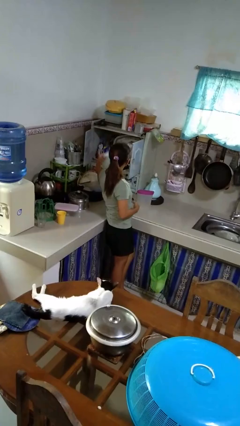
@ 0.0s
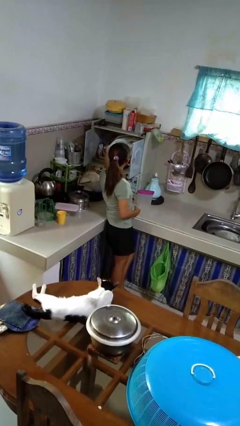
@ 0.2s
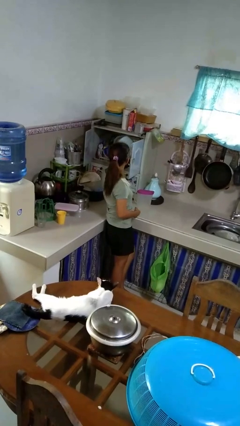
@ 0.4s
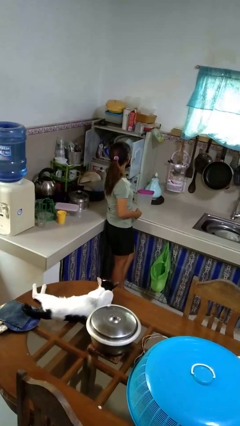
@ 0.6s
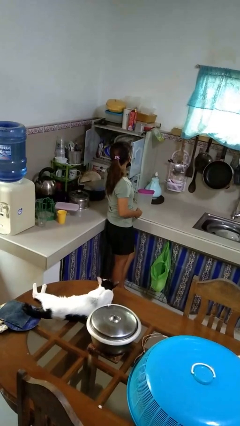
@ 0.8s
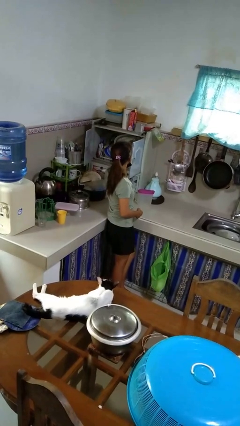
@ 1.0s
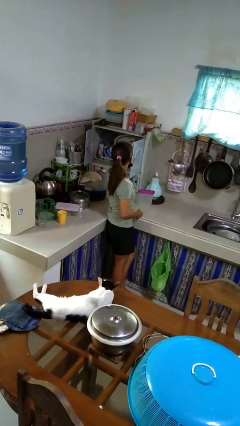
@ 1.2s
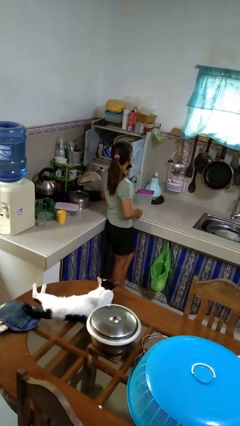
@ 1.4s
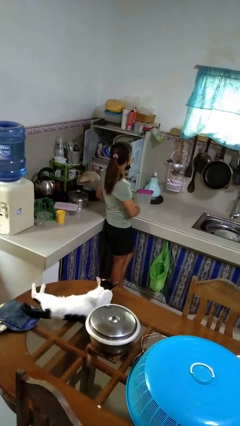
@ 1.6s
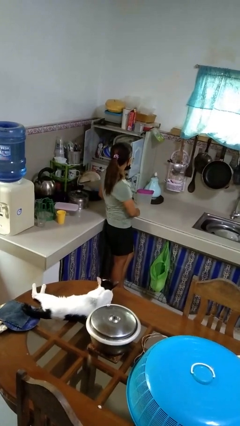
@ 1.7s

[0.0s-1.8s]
person puts object into kitchen drawer

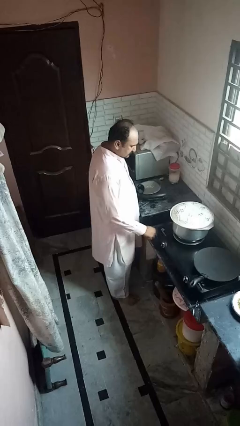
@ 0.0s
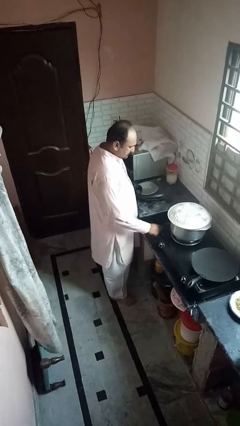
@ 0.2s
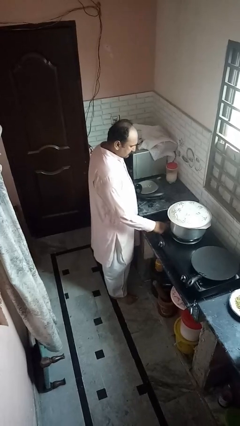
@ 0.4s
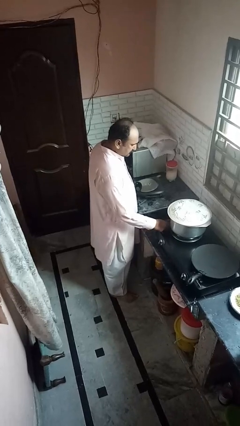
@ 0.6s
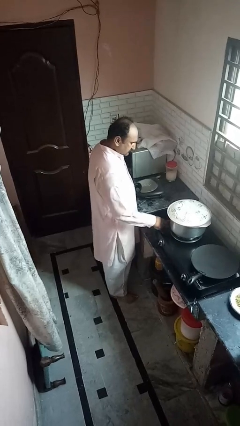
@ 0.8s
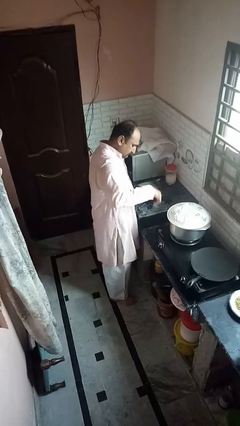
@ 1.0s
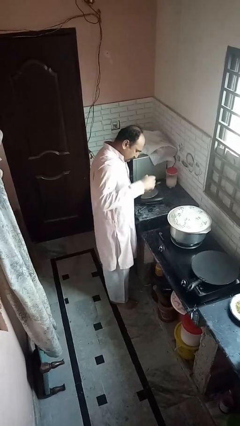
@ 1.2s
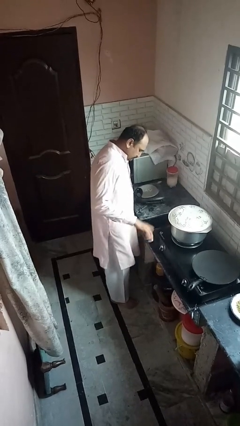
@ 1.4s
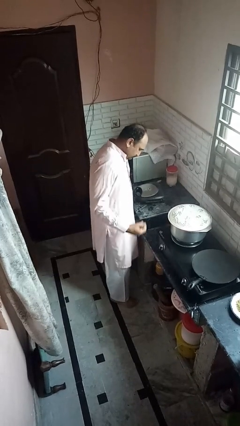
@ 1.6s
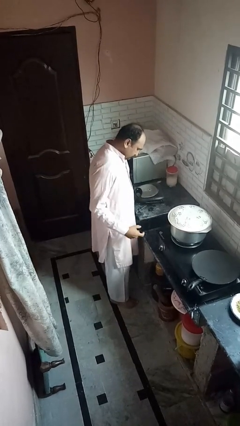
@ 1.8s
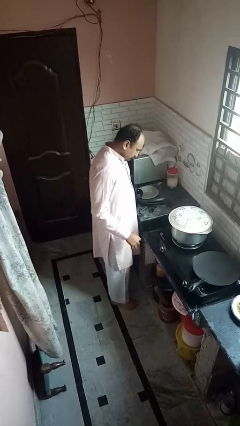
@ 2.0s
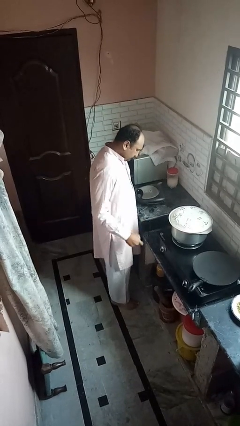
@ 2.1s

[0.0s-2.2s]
person burns hand

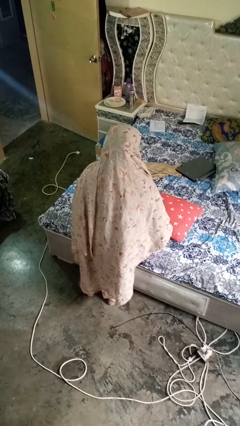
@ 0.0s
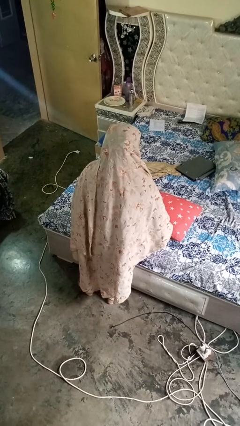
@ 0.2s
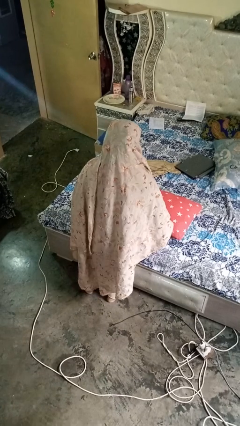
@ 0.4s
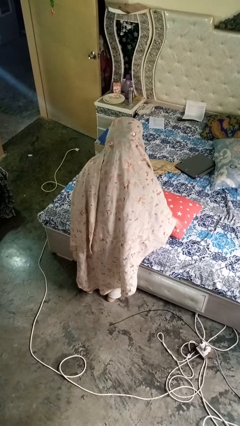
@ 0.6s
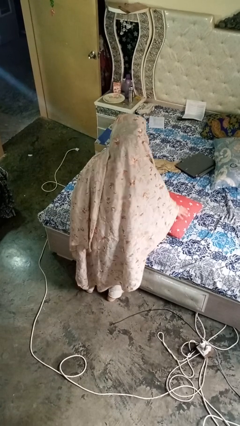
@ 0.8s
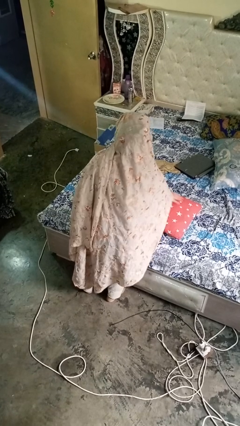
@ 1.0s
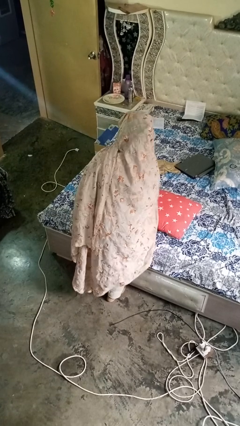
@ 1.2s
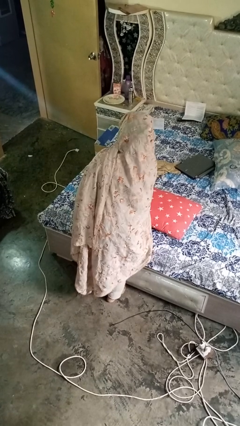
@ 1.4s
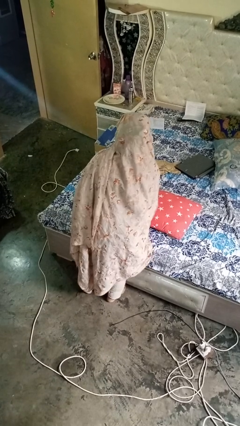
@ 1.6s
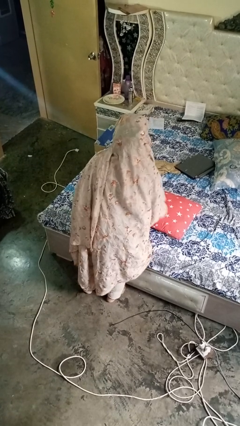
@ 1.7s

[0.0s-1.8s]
person waves hand over object

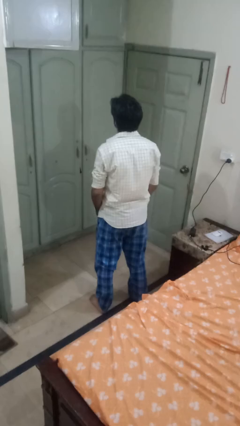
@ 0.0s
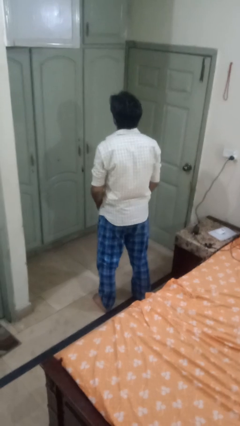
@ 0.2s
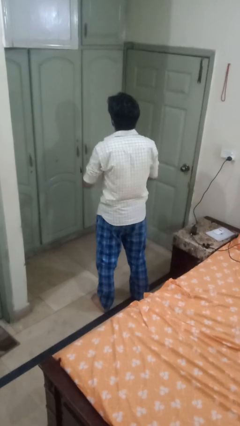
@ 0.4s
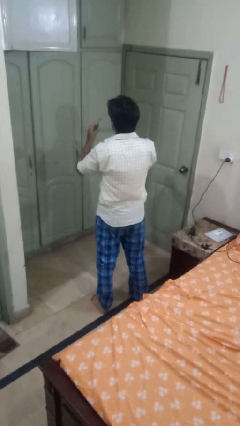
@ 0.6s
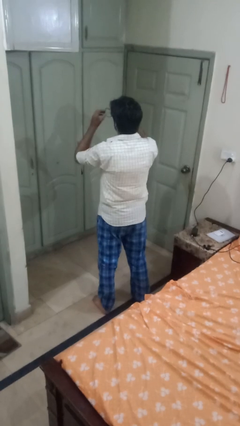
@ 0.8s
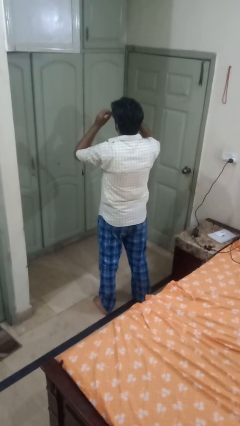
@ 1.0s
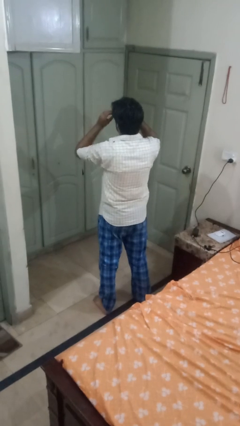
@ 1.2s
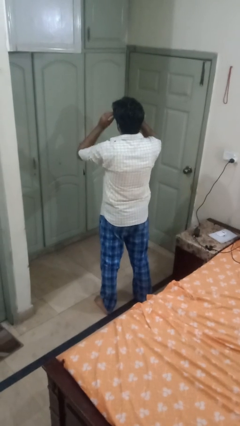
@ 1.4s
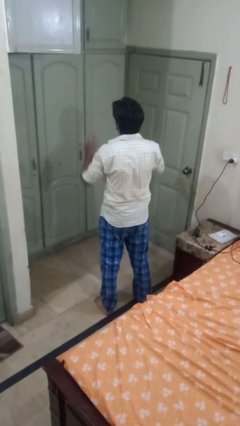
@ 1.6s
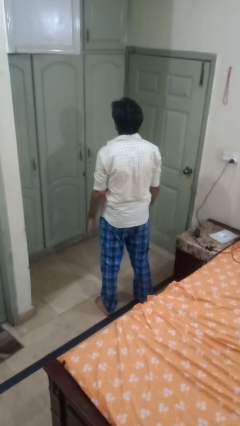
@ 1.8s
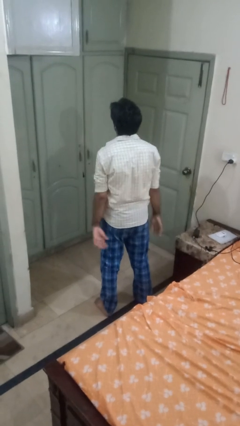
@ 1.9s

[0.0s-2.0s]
person puts on glasses

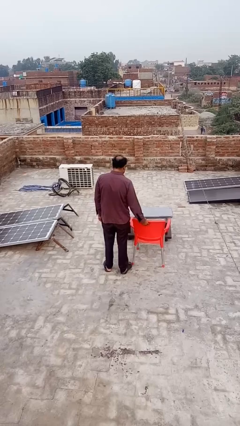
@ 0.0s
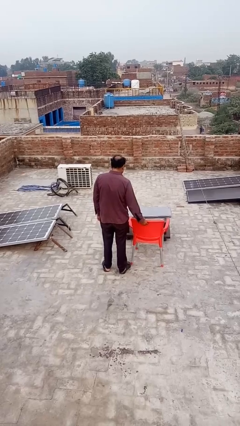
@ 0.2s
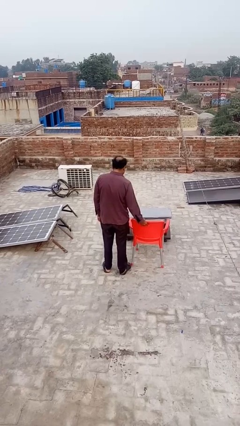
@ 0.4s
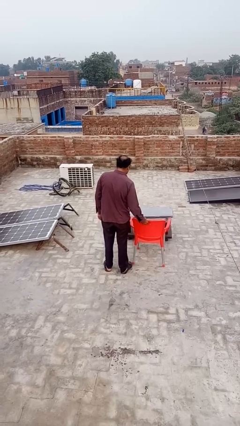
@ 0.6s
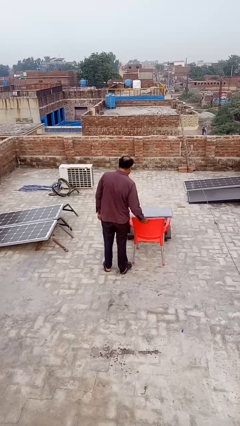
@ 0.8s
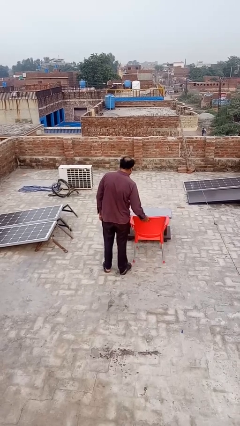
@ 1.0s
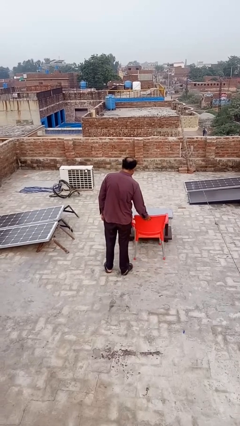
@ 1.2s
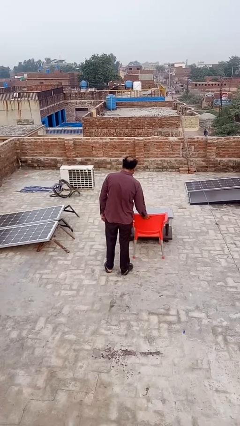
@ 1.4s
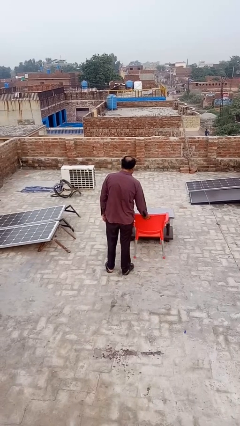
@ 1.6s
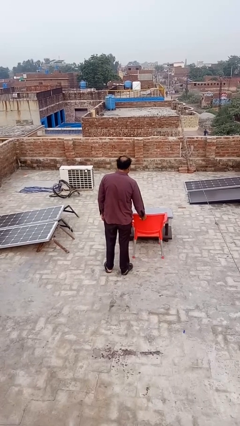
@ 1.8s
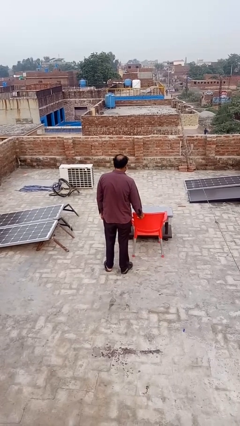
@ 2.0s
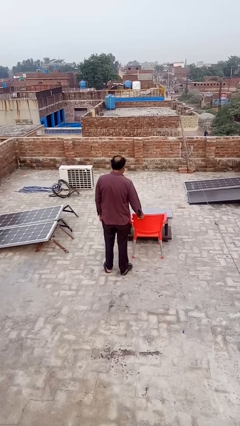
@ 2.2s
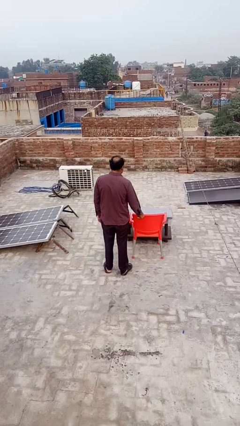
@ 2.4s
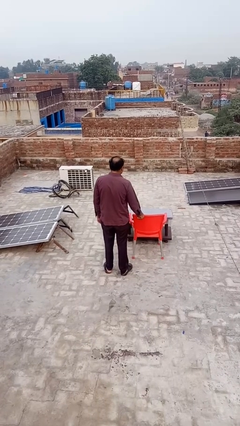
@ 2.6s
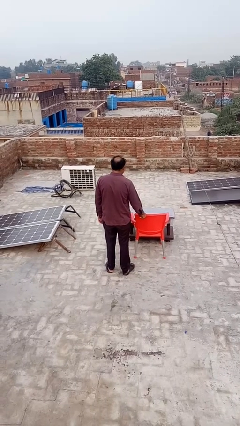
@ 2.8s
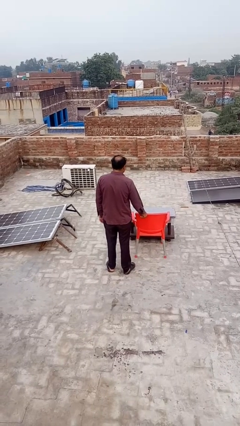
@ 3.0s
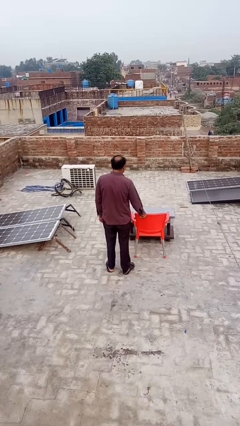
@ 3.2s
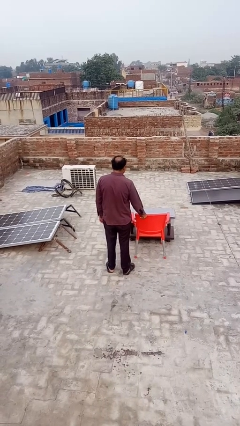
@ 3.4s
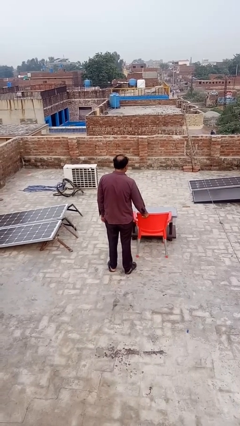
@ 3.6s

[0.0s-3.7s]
person pushes in chair

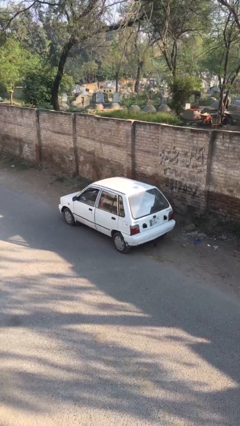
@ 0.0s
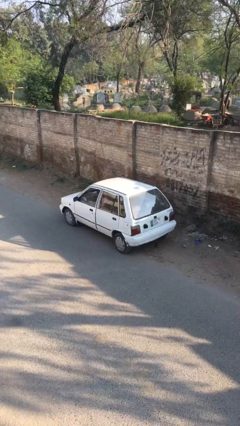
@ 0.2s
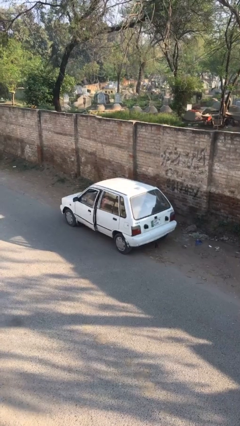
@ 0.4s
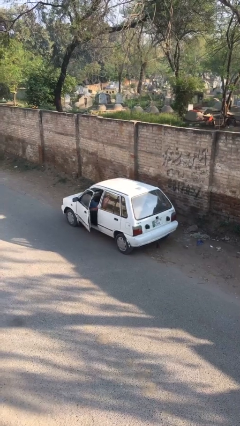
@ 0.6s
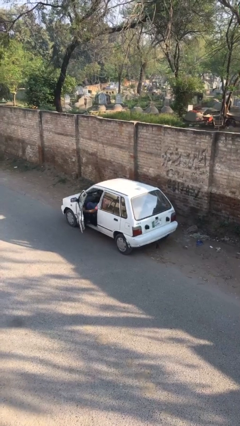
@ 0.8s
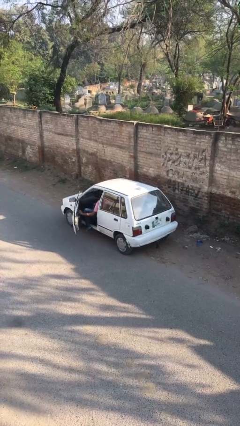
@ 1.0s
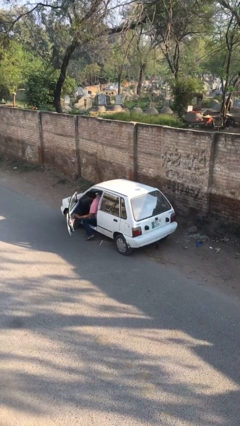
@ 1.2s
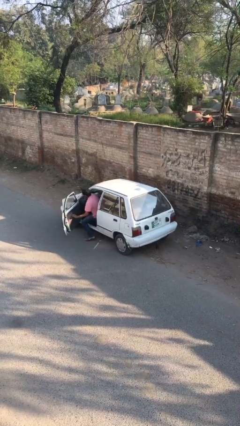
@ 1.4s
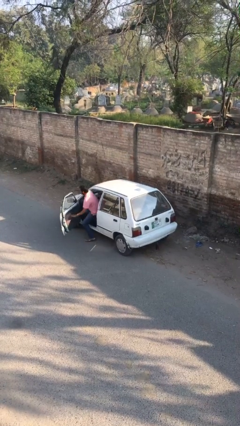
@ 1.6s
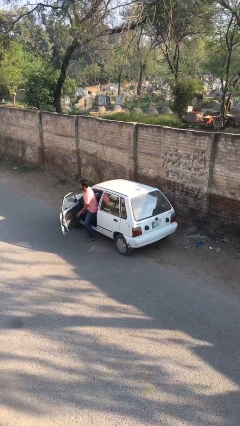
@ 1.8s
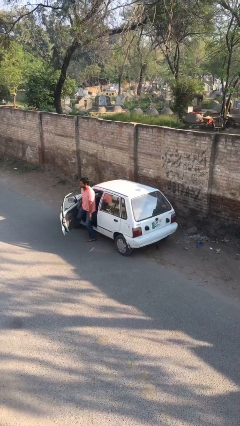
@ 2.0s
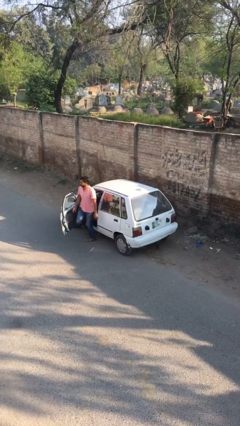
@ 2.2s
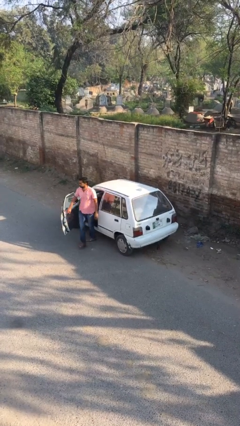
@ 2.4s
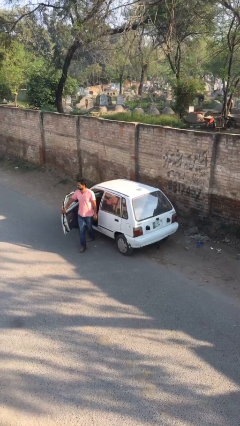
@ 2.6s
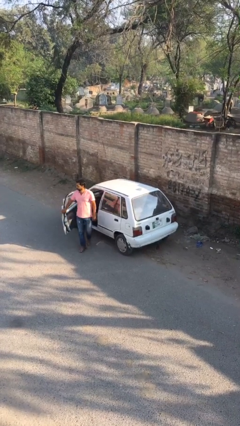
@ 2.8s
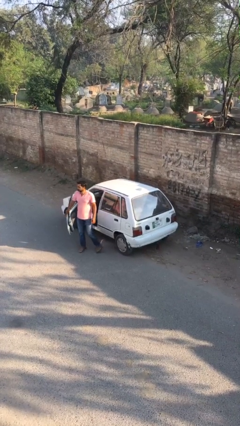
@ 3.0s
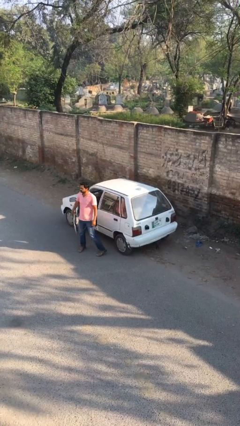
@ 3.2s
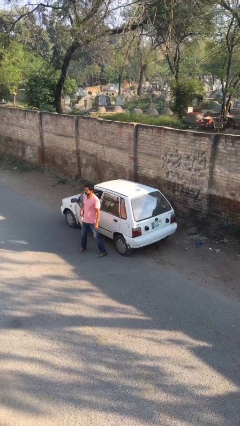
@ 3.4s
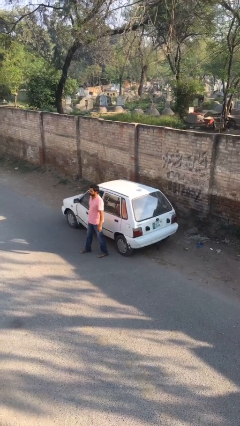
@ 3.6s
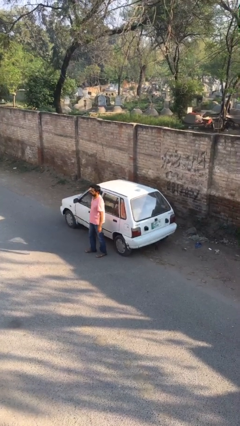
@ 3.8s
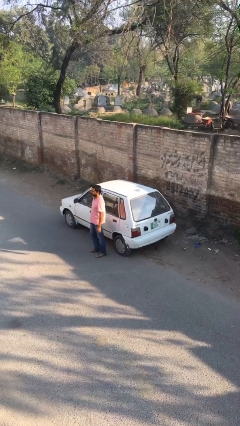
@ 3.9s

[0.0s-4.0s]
car drops off person

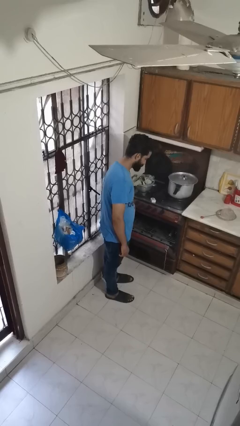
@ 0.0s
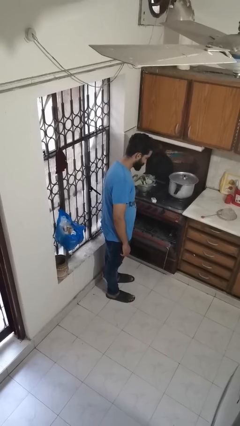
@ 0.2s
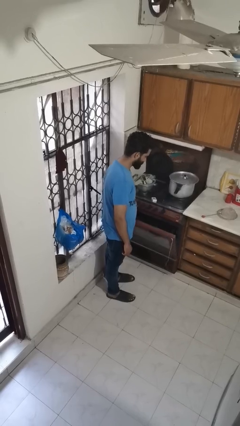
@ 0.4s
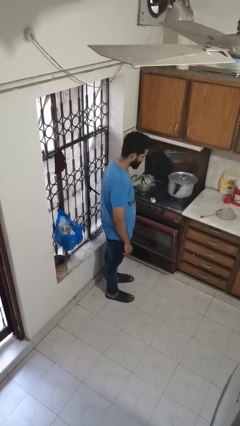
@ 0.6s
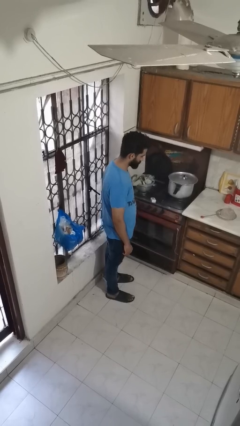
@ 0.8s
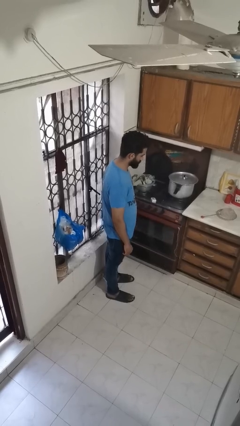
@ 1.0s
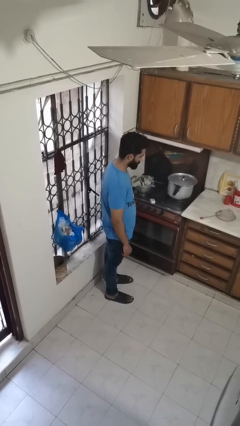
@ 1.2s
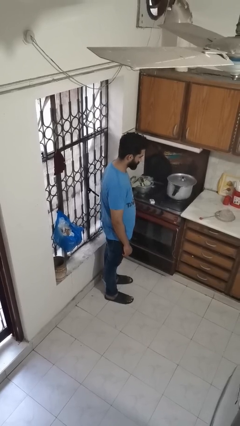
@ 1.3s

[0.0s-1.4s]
person closes oven door
